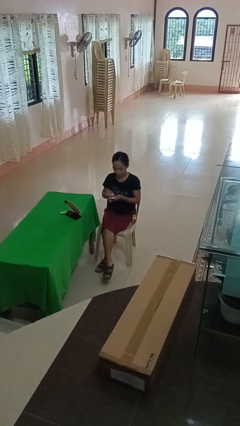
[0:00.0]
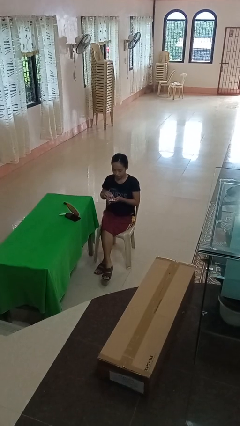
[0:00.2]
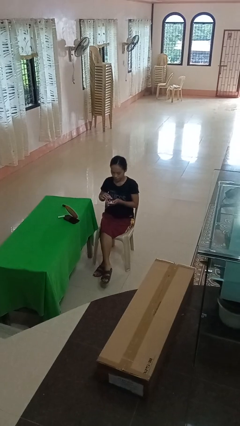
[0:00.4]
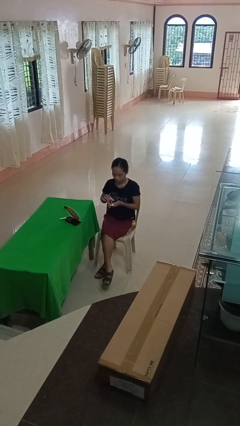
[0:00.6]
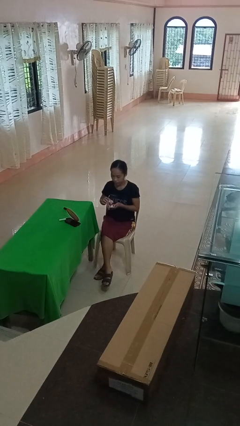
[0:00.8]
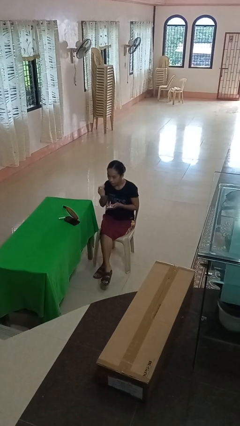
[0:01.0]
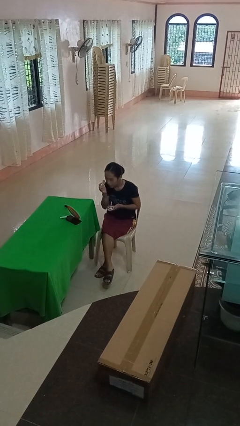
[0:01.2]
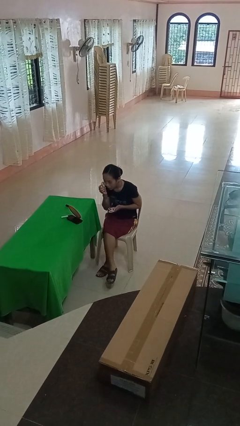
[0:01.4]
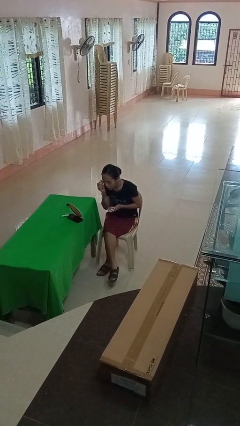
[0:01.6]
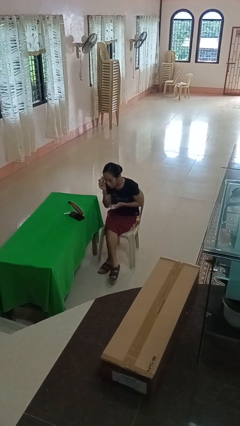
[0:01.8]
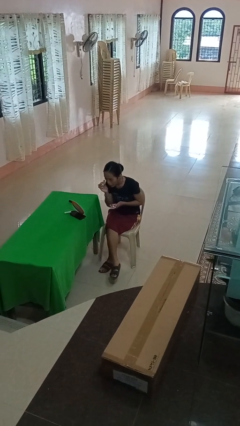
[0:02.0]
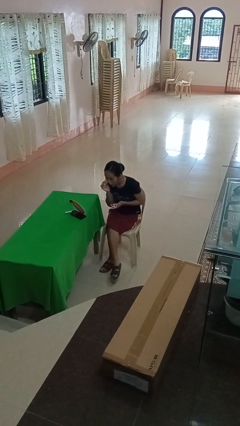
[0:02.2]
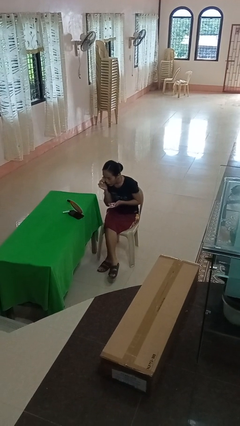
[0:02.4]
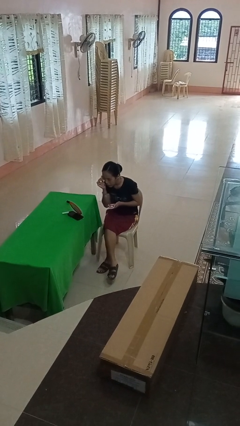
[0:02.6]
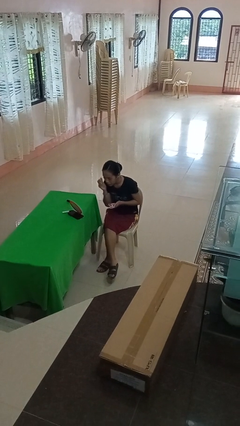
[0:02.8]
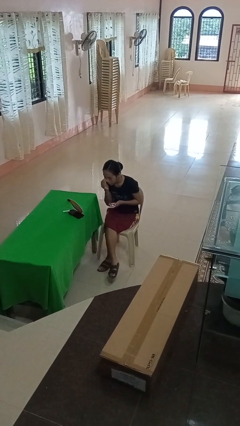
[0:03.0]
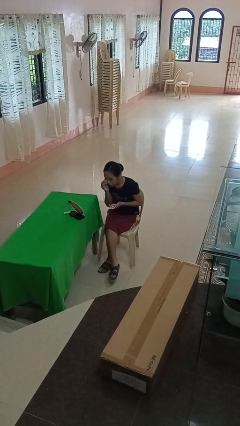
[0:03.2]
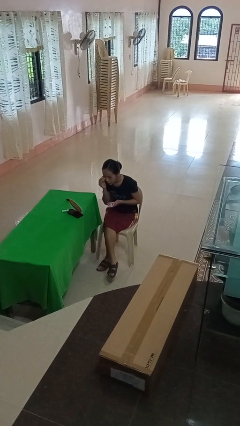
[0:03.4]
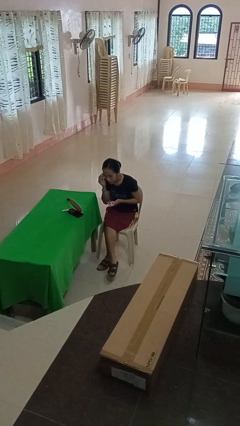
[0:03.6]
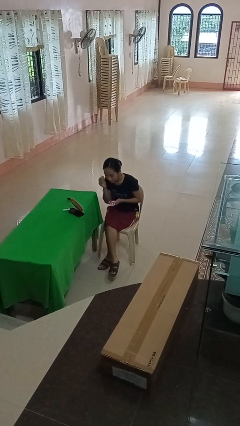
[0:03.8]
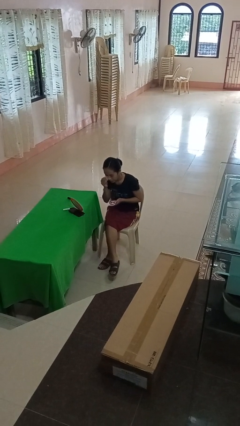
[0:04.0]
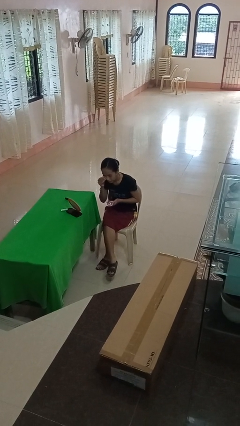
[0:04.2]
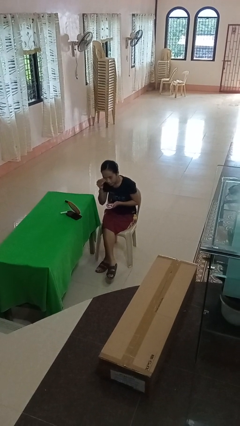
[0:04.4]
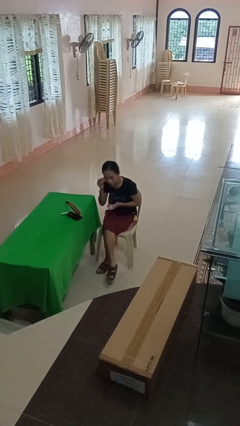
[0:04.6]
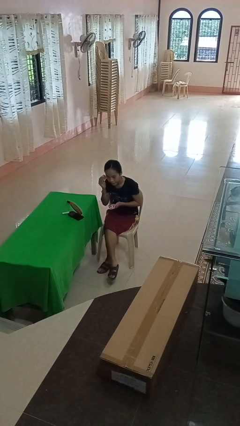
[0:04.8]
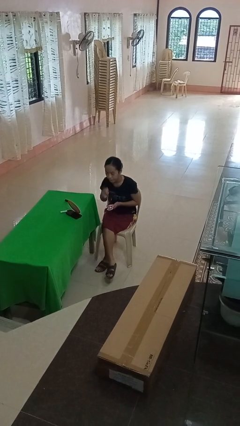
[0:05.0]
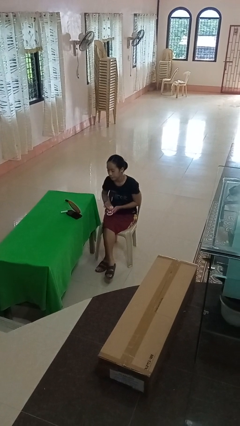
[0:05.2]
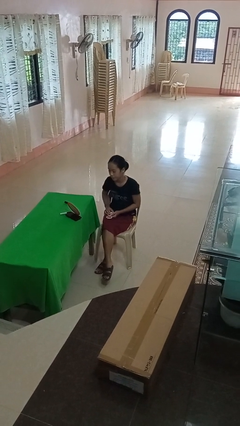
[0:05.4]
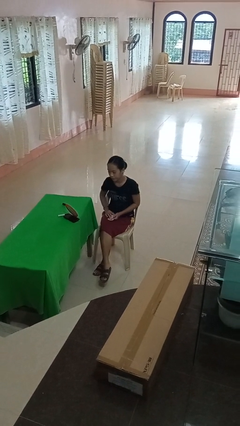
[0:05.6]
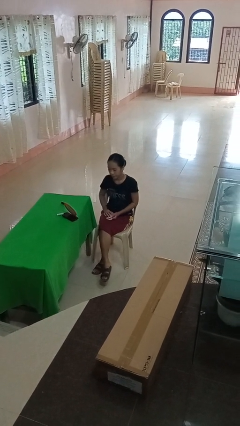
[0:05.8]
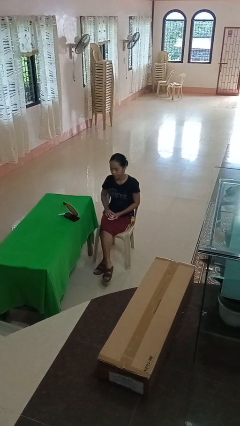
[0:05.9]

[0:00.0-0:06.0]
person applies foundation makeup

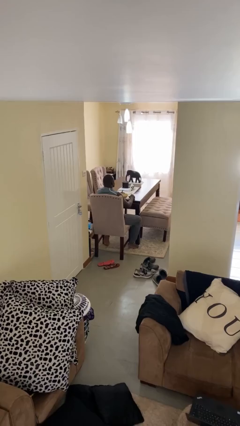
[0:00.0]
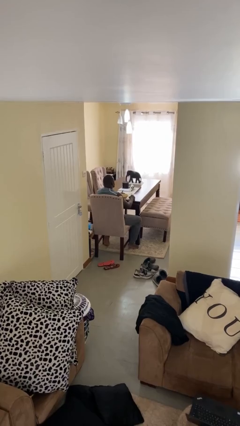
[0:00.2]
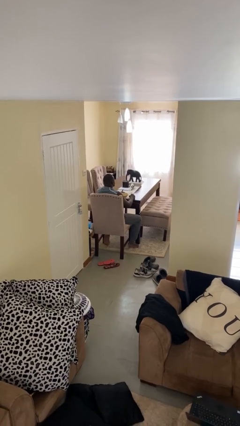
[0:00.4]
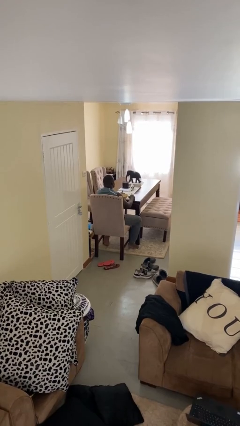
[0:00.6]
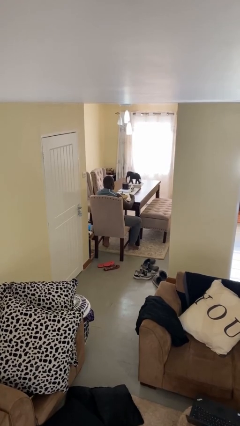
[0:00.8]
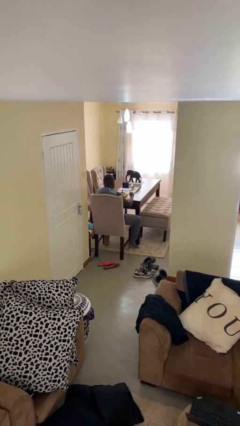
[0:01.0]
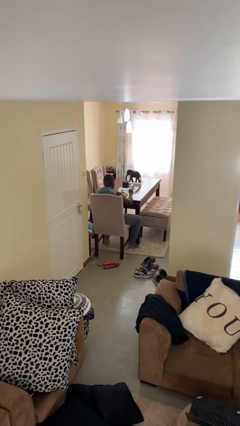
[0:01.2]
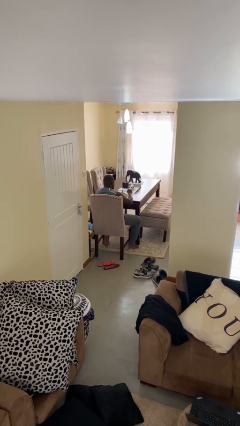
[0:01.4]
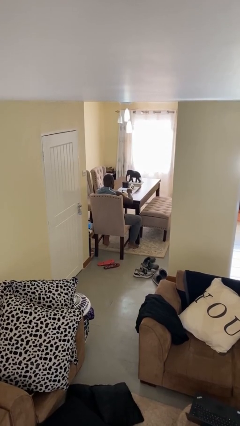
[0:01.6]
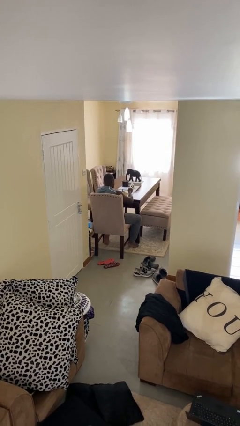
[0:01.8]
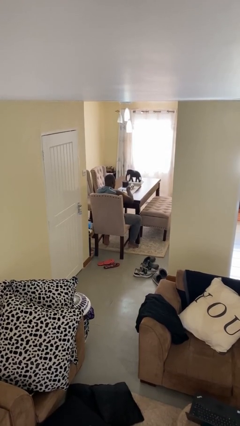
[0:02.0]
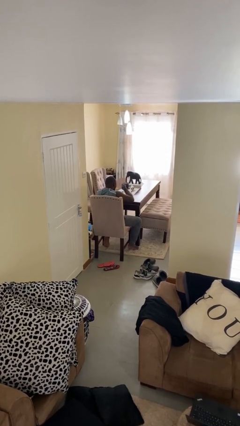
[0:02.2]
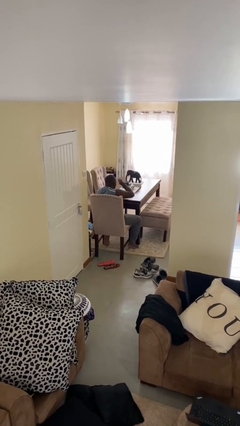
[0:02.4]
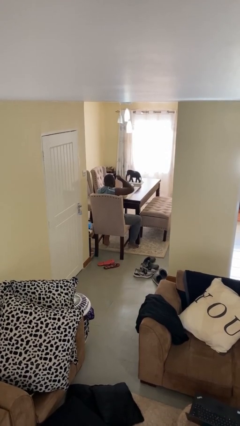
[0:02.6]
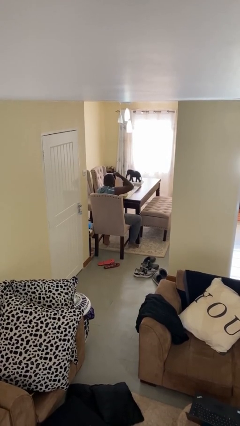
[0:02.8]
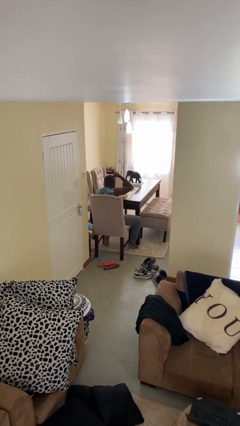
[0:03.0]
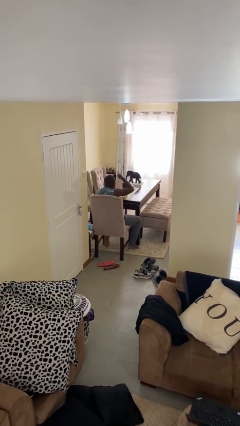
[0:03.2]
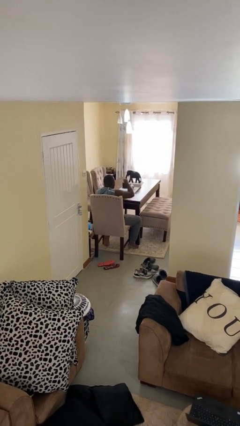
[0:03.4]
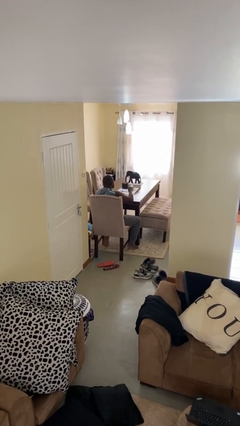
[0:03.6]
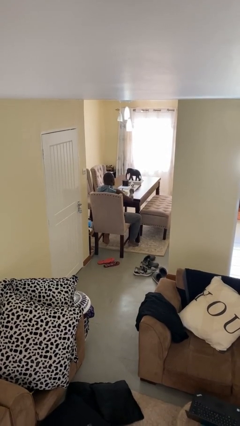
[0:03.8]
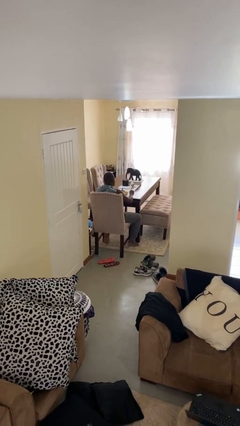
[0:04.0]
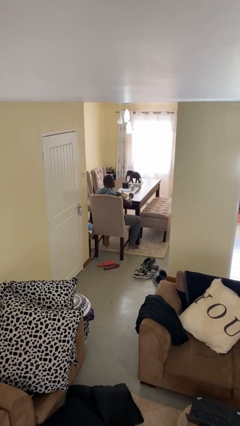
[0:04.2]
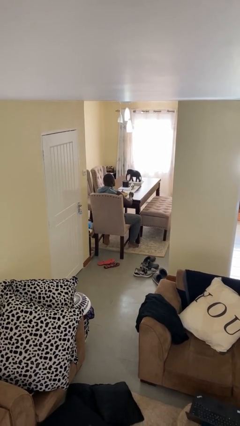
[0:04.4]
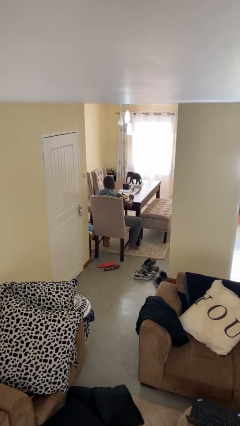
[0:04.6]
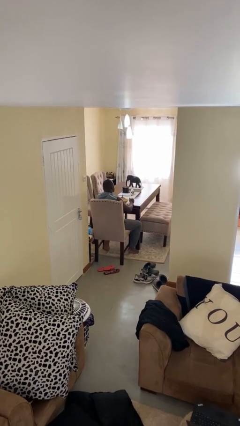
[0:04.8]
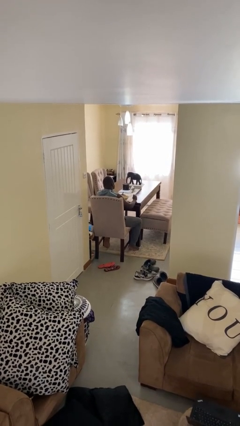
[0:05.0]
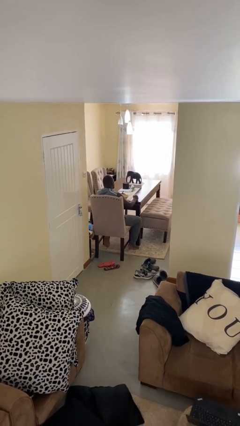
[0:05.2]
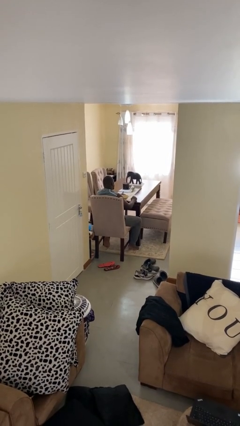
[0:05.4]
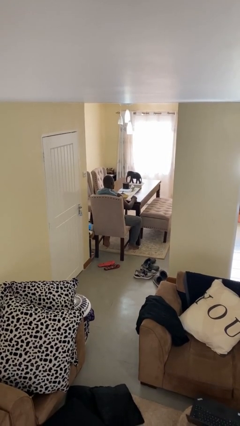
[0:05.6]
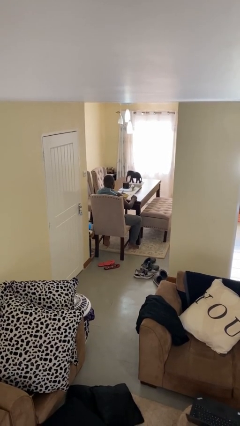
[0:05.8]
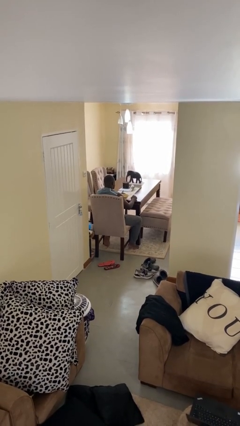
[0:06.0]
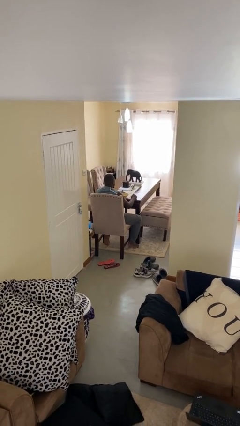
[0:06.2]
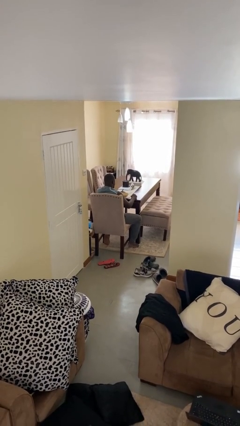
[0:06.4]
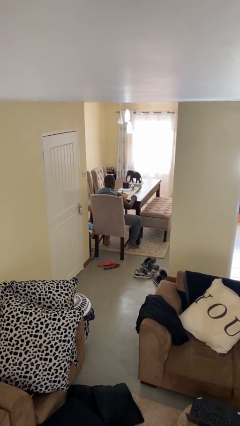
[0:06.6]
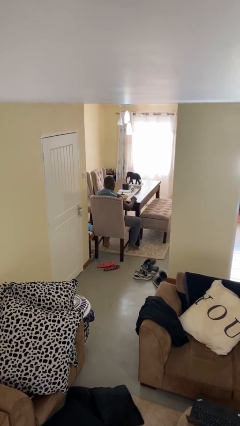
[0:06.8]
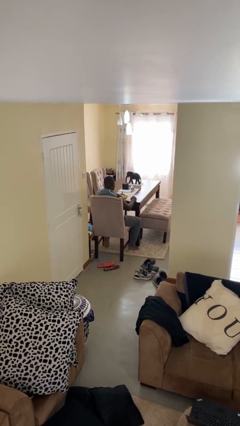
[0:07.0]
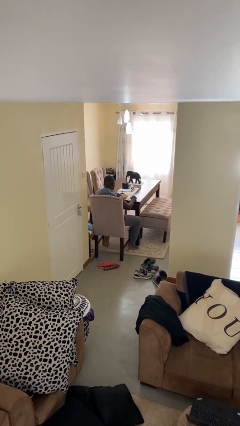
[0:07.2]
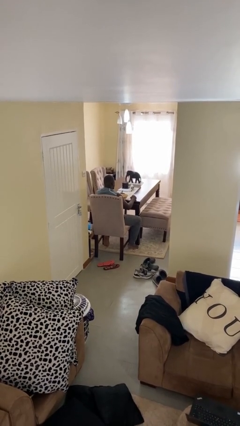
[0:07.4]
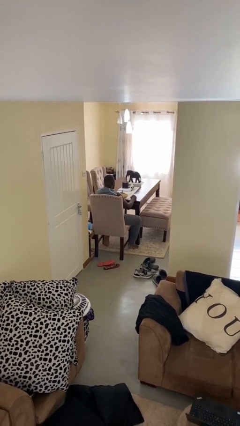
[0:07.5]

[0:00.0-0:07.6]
person eats with utensil

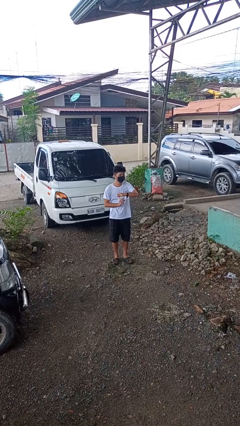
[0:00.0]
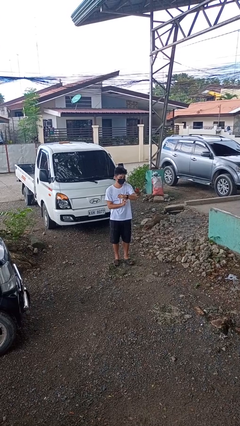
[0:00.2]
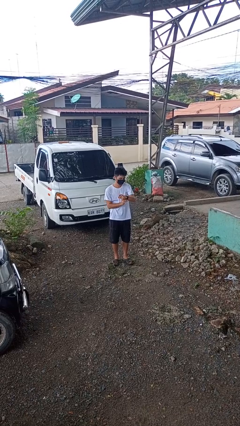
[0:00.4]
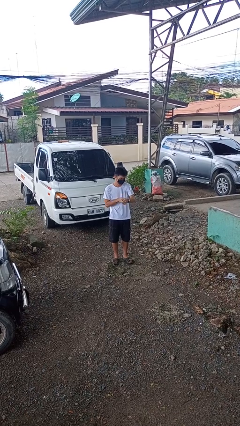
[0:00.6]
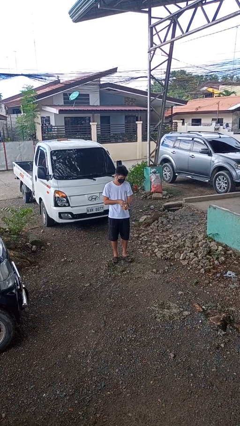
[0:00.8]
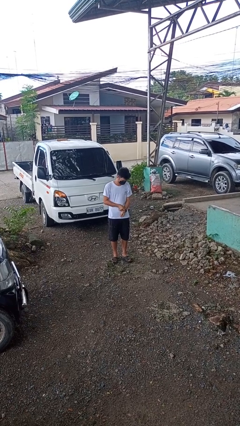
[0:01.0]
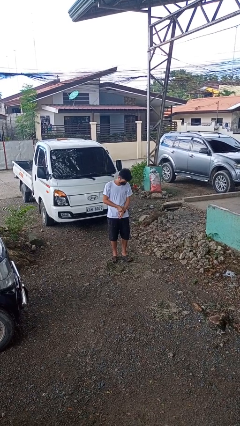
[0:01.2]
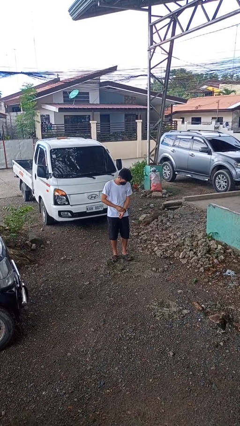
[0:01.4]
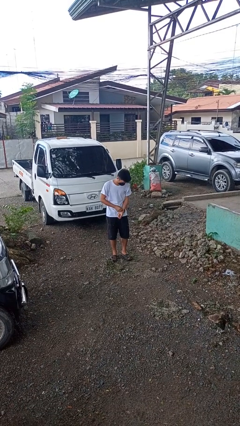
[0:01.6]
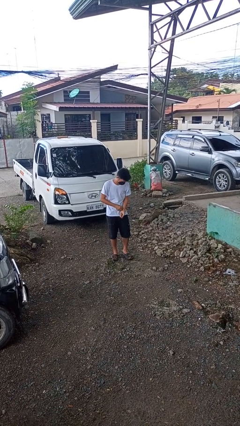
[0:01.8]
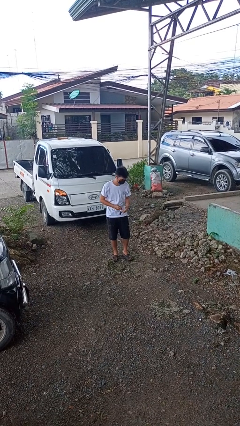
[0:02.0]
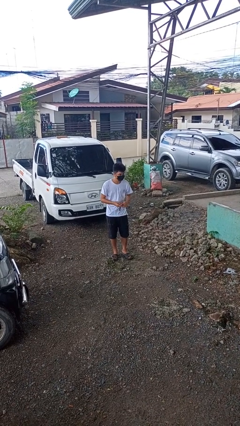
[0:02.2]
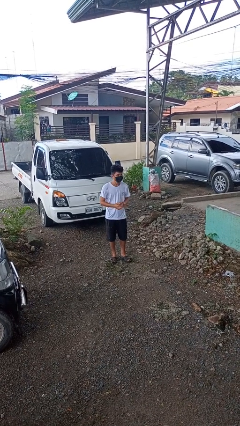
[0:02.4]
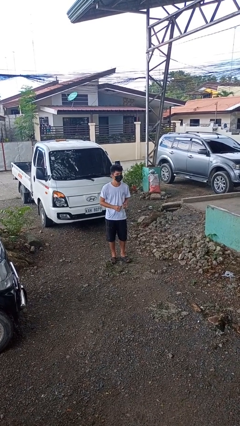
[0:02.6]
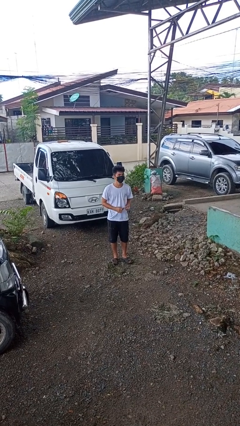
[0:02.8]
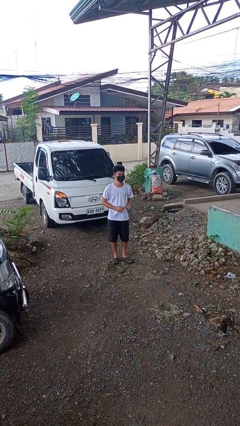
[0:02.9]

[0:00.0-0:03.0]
person takes off wristwatch

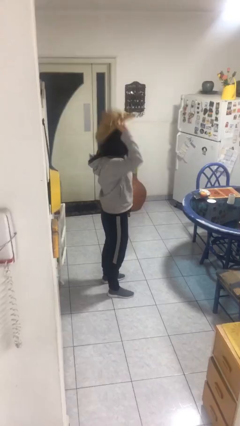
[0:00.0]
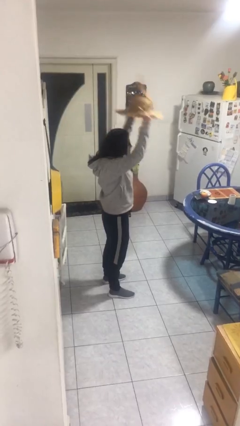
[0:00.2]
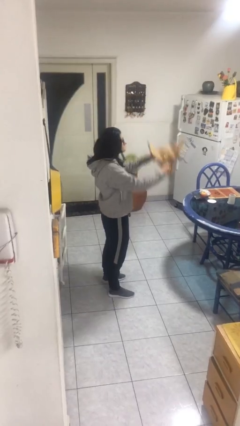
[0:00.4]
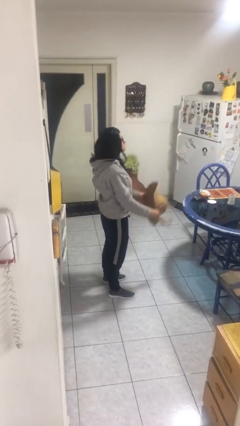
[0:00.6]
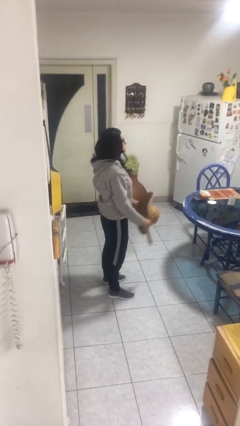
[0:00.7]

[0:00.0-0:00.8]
person takes off hat

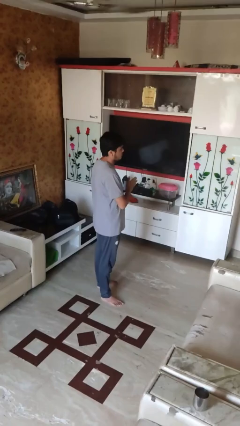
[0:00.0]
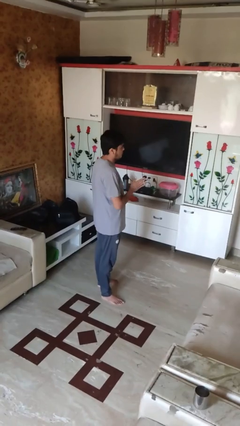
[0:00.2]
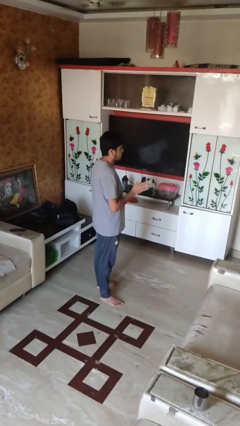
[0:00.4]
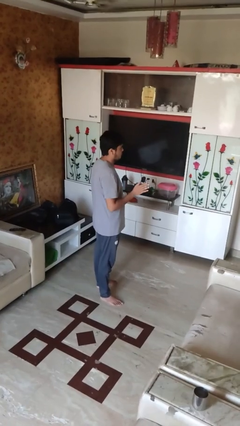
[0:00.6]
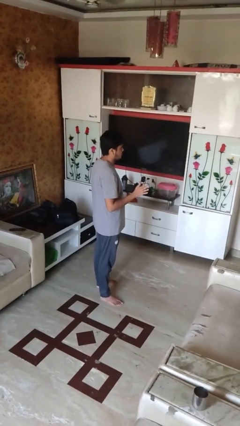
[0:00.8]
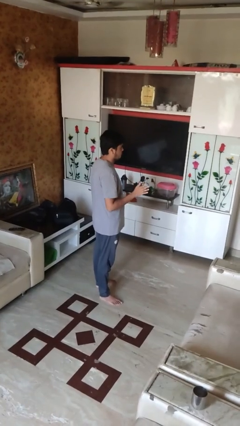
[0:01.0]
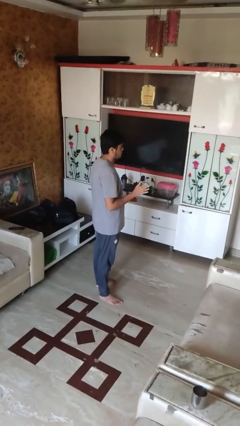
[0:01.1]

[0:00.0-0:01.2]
person gestures swipe left
